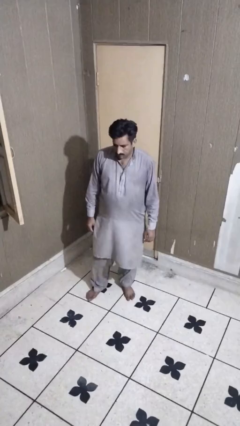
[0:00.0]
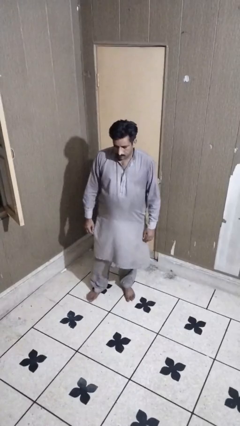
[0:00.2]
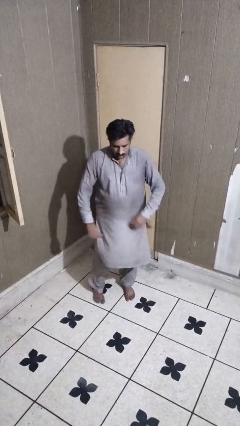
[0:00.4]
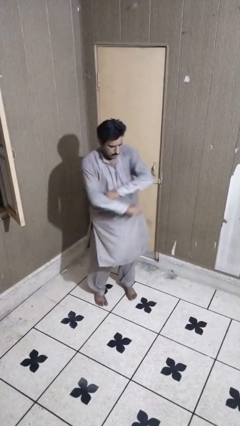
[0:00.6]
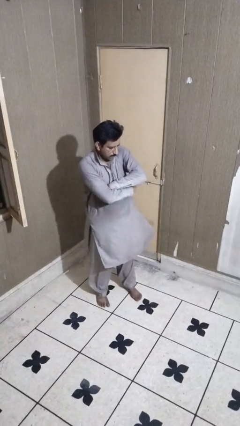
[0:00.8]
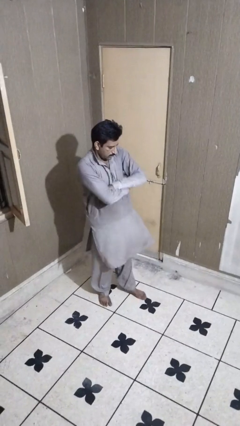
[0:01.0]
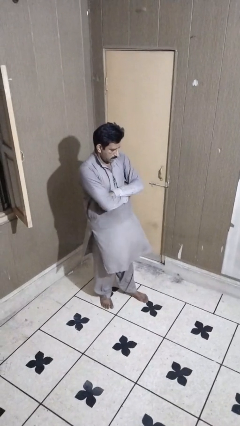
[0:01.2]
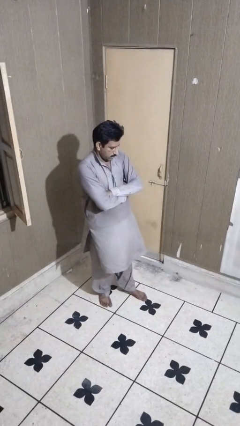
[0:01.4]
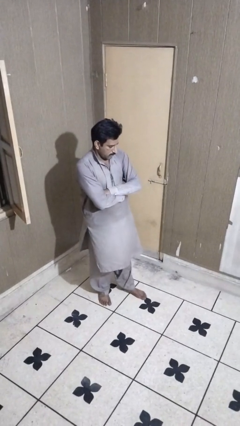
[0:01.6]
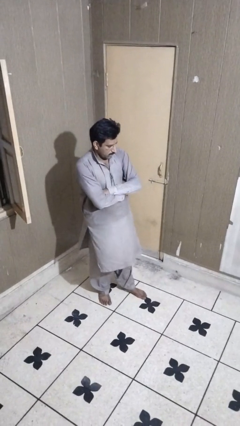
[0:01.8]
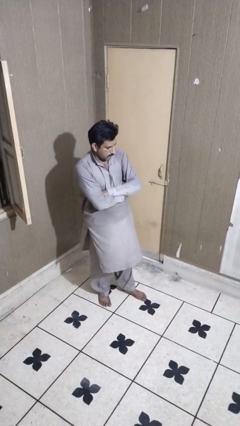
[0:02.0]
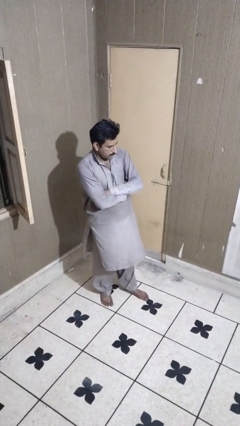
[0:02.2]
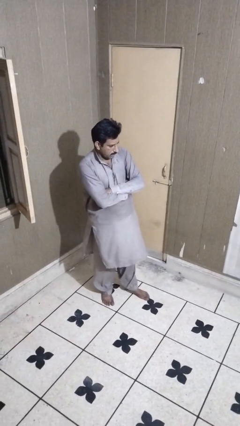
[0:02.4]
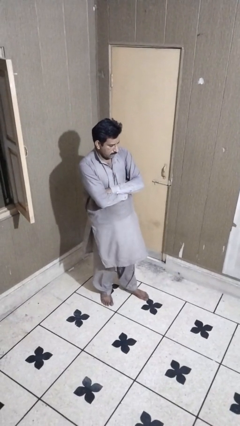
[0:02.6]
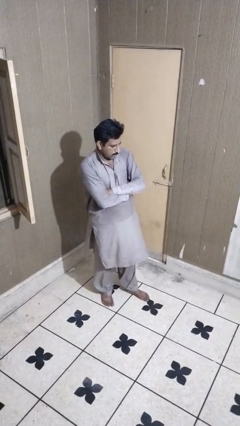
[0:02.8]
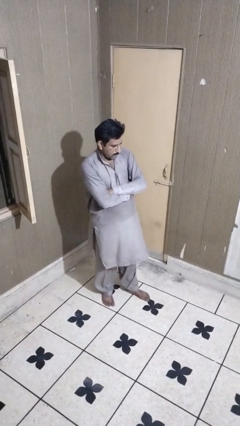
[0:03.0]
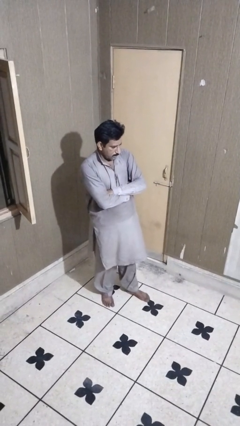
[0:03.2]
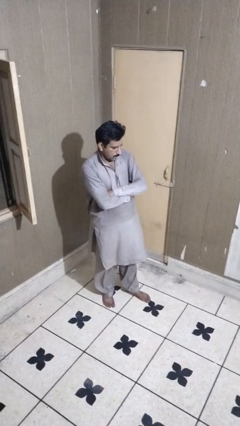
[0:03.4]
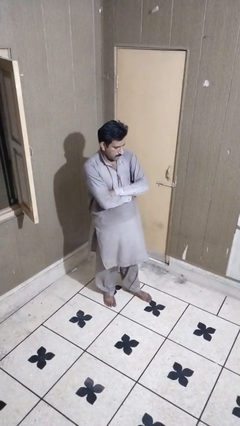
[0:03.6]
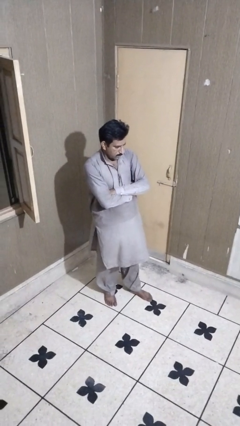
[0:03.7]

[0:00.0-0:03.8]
person crosses arms

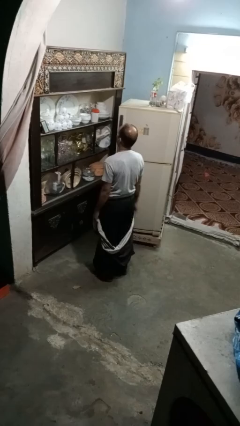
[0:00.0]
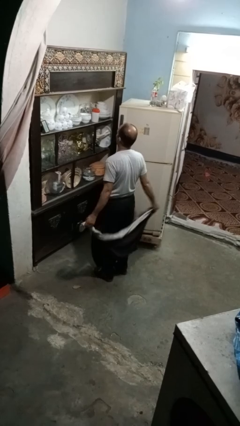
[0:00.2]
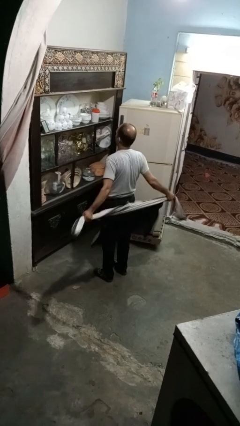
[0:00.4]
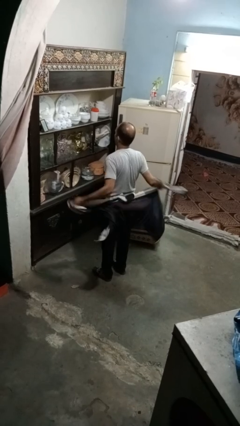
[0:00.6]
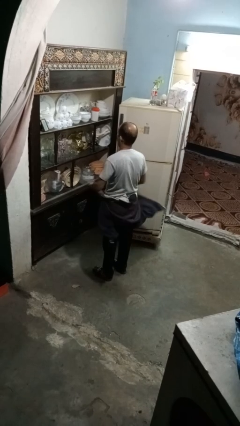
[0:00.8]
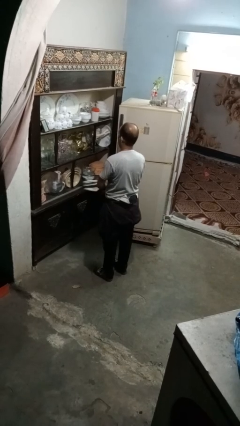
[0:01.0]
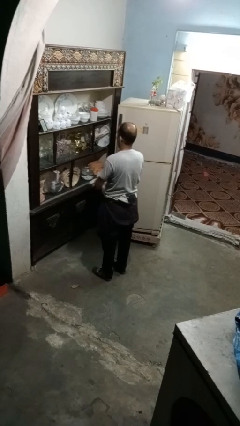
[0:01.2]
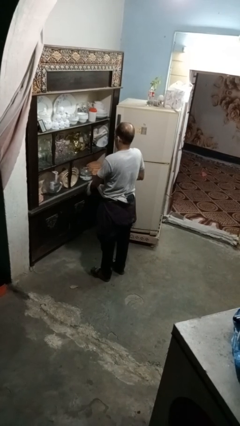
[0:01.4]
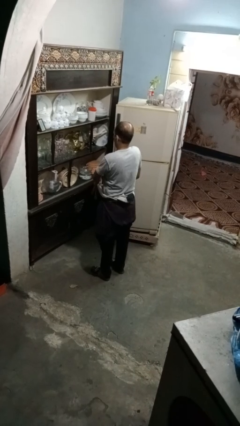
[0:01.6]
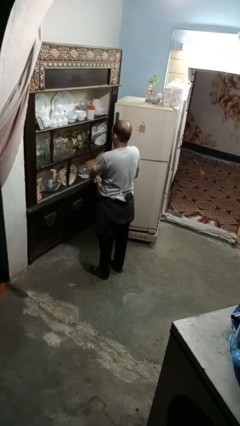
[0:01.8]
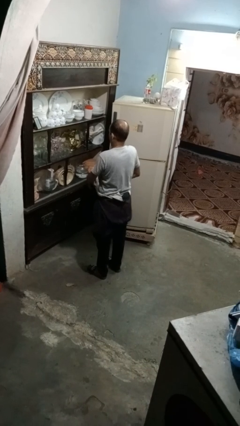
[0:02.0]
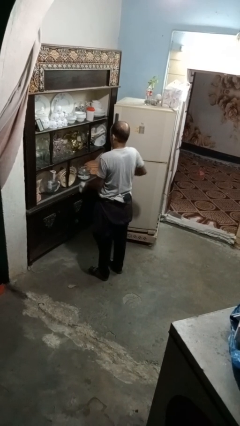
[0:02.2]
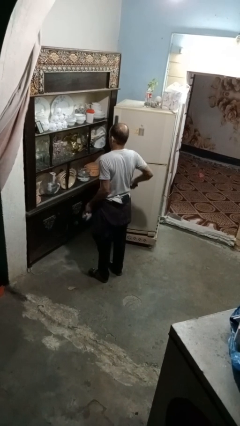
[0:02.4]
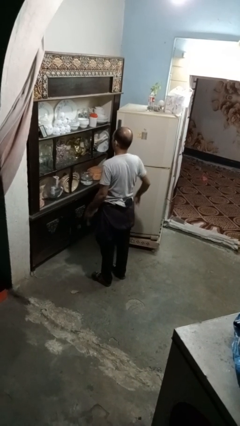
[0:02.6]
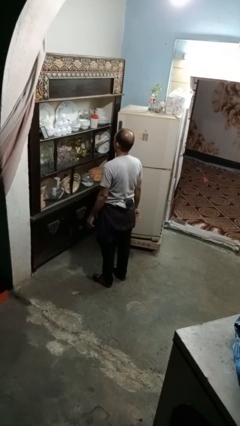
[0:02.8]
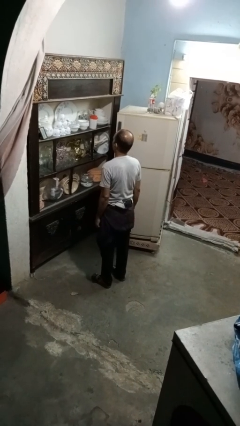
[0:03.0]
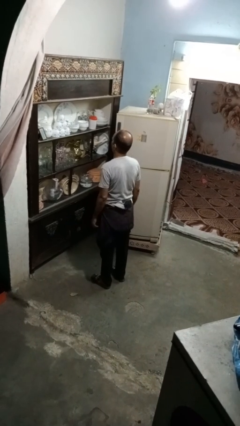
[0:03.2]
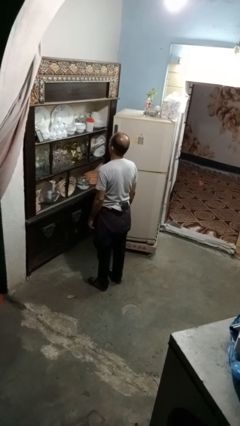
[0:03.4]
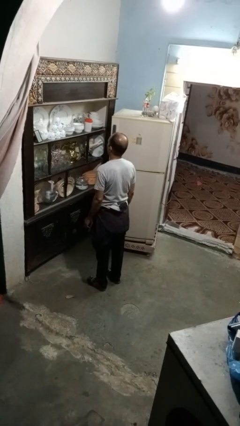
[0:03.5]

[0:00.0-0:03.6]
person ties jacket around waist

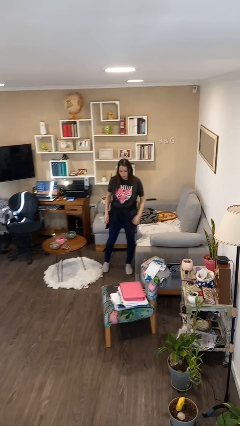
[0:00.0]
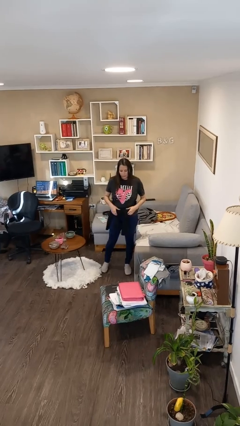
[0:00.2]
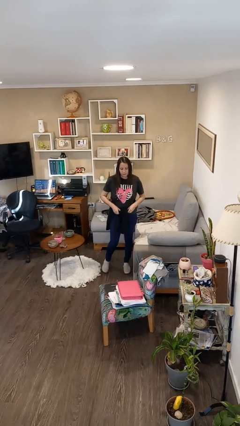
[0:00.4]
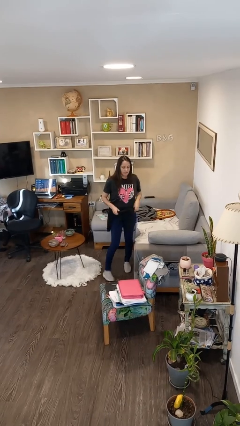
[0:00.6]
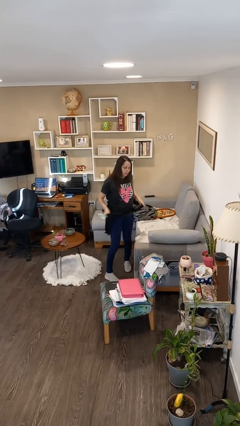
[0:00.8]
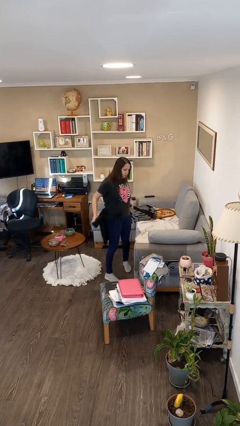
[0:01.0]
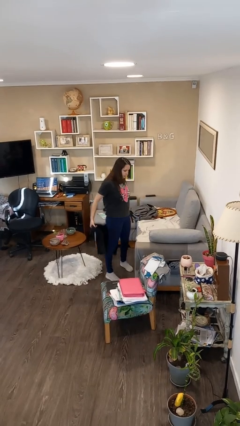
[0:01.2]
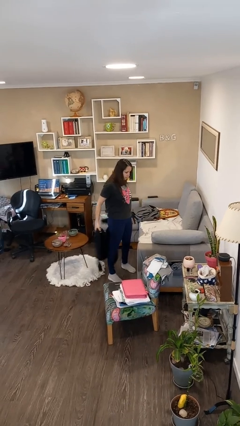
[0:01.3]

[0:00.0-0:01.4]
person unties jacket around waist

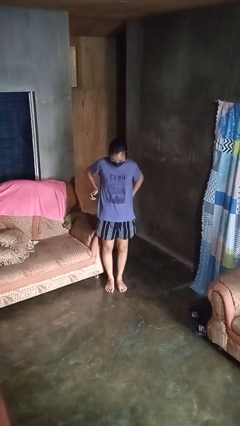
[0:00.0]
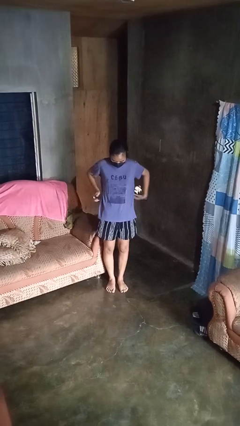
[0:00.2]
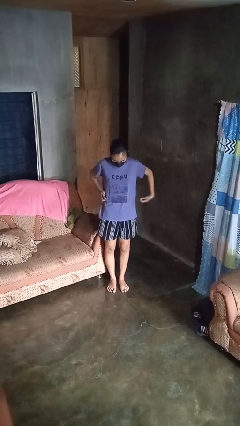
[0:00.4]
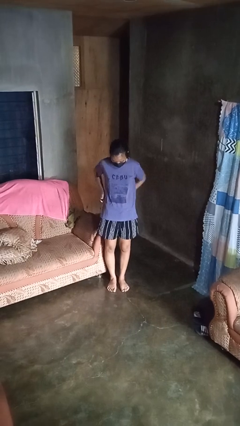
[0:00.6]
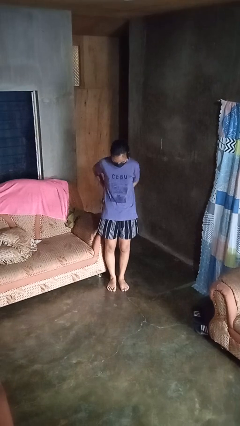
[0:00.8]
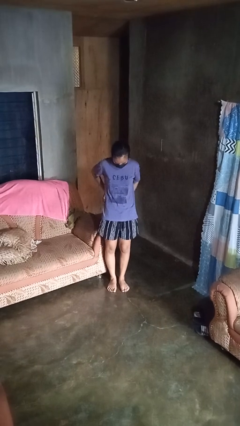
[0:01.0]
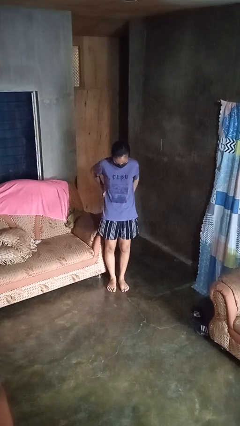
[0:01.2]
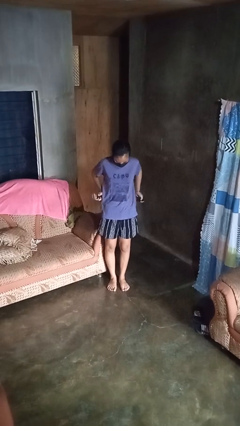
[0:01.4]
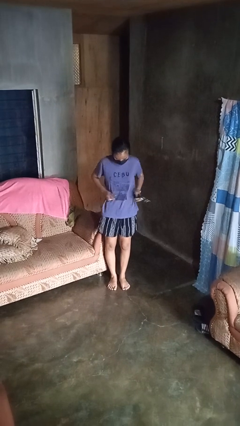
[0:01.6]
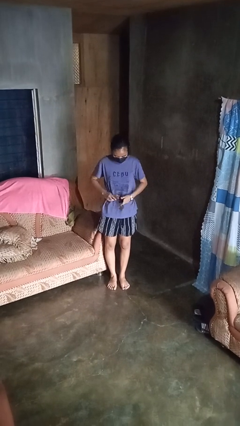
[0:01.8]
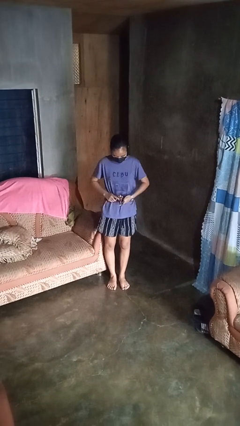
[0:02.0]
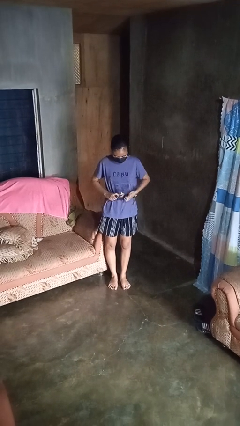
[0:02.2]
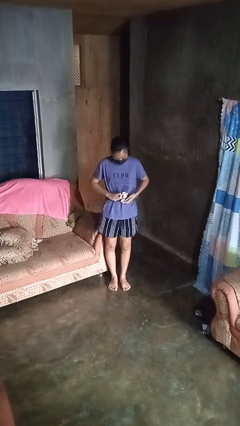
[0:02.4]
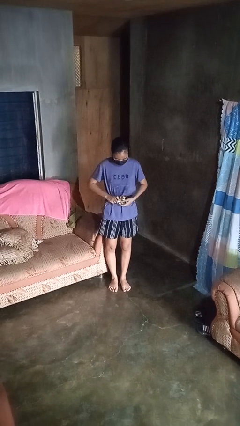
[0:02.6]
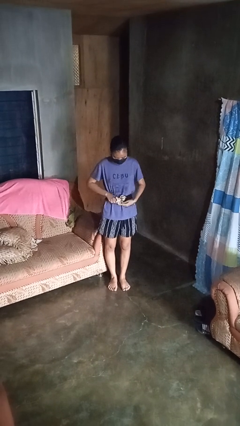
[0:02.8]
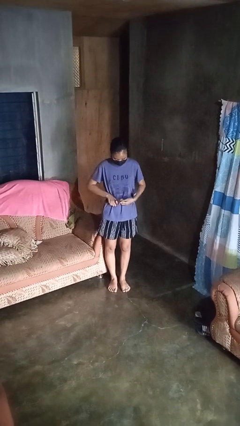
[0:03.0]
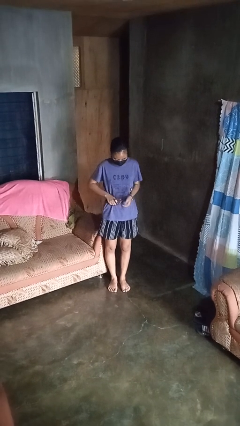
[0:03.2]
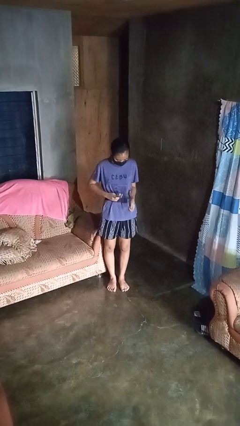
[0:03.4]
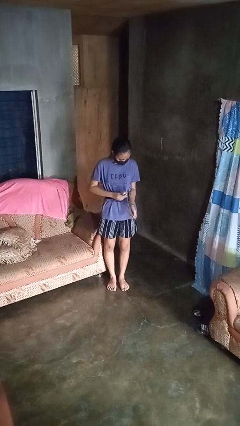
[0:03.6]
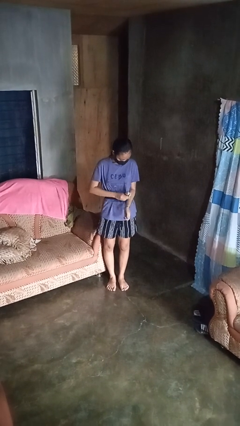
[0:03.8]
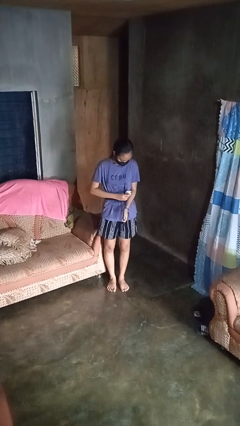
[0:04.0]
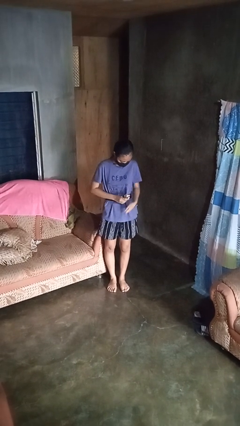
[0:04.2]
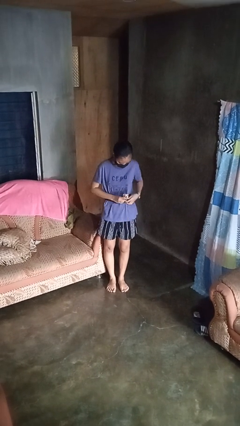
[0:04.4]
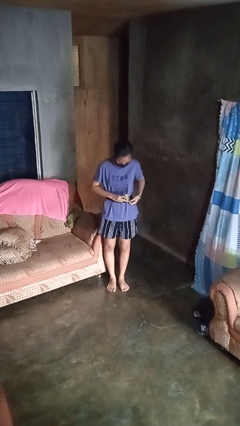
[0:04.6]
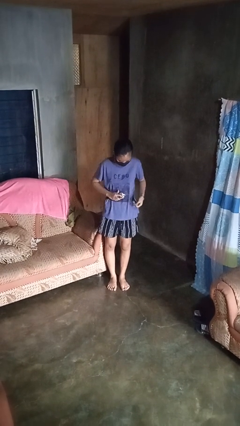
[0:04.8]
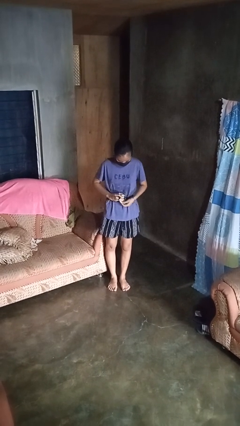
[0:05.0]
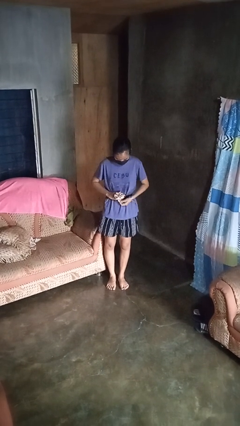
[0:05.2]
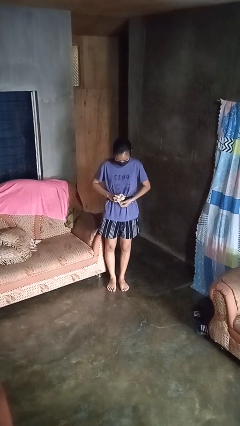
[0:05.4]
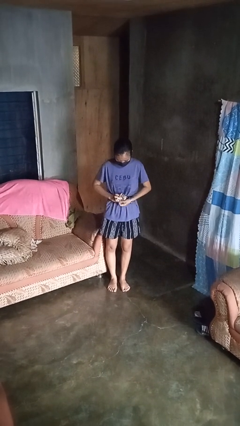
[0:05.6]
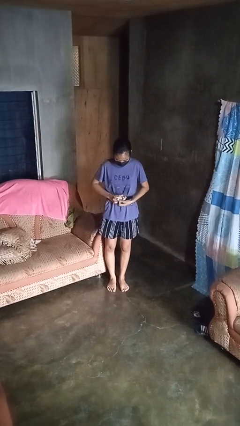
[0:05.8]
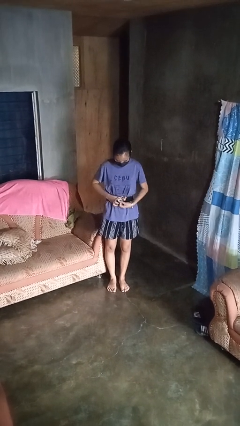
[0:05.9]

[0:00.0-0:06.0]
person puts on belt

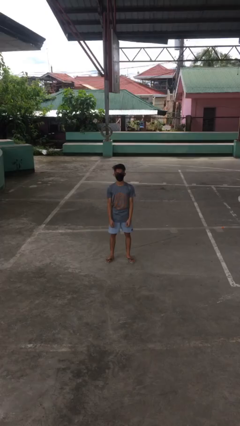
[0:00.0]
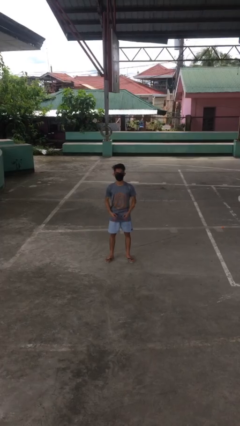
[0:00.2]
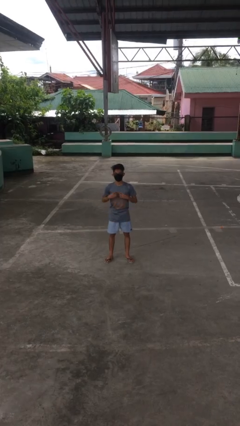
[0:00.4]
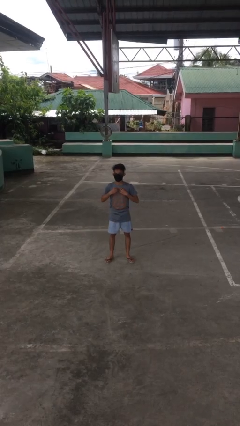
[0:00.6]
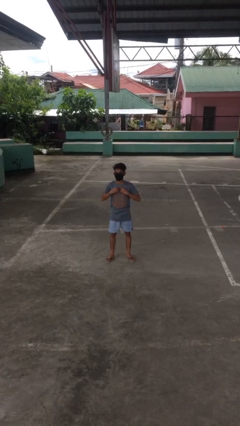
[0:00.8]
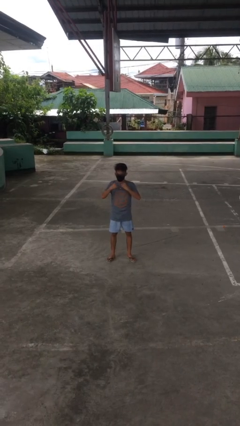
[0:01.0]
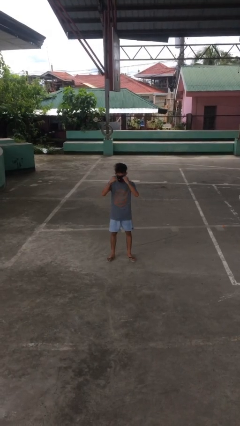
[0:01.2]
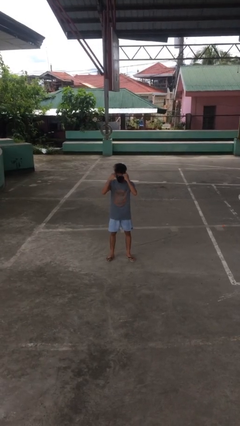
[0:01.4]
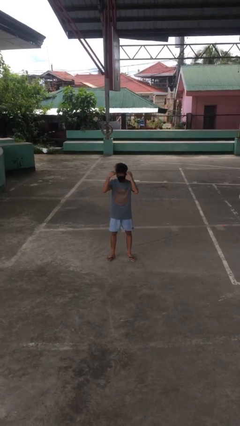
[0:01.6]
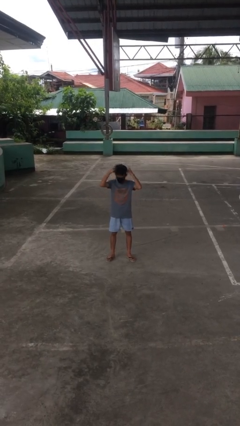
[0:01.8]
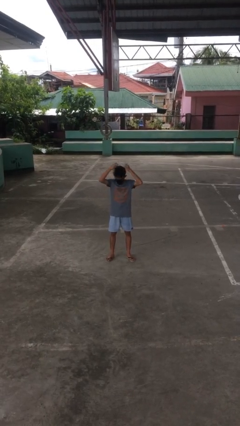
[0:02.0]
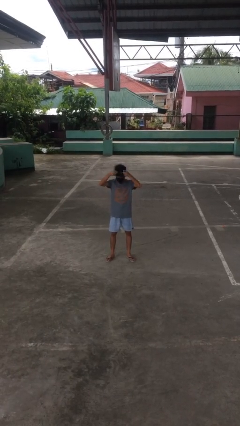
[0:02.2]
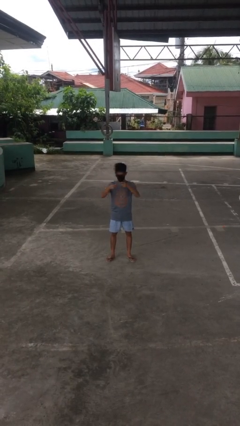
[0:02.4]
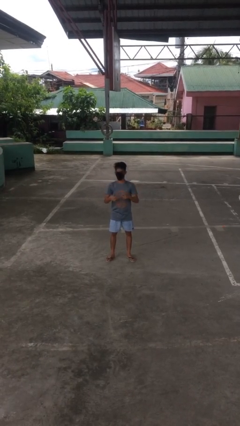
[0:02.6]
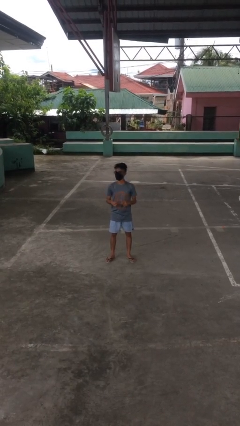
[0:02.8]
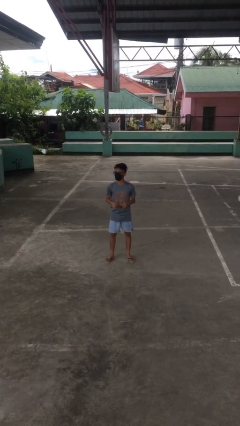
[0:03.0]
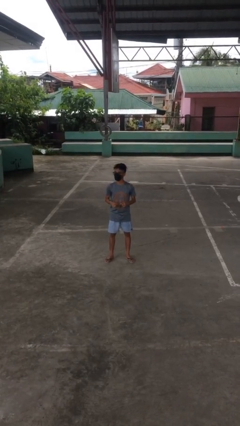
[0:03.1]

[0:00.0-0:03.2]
person takes off necklace
